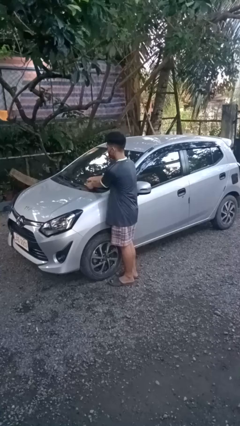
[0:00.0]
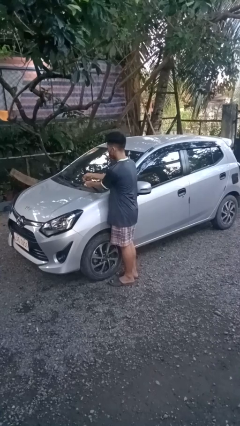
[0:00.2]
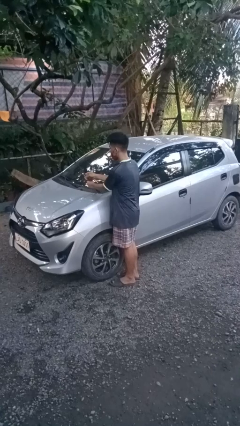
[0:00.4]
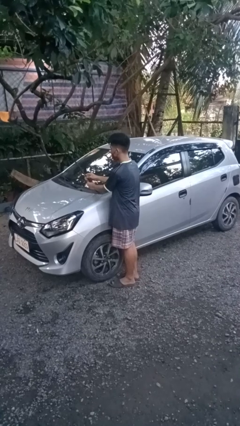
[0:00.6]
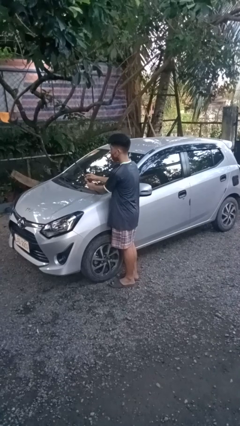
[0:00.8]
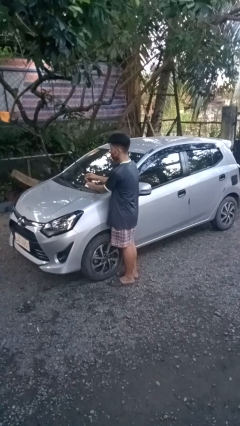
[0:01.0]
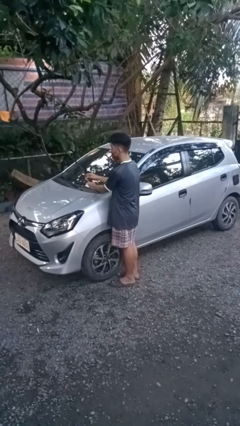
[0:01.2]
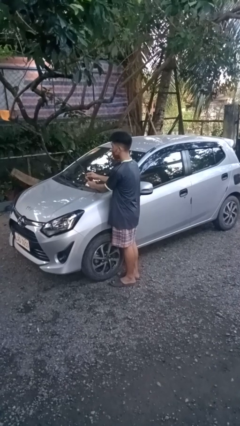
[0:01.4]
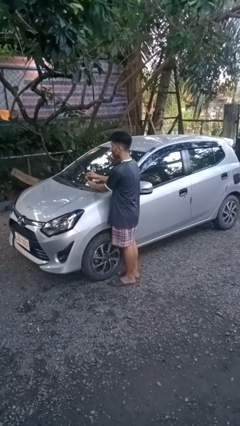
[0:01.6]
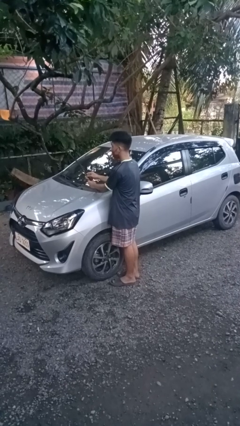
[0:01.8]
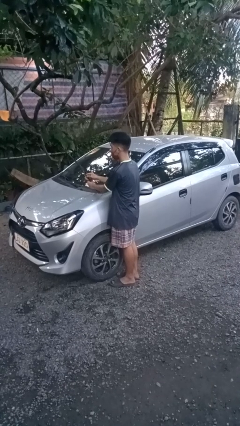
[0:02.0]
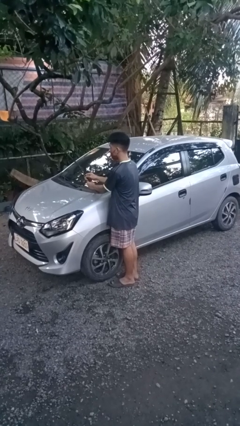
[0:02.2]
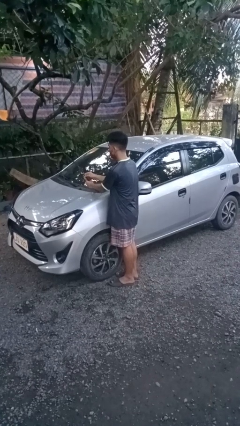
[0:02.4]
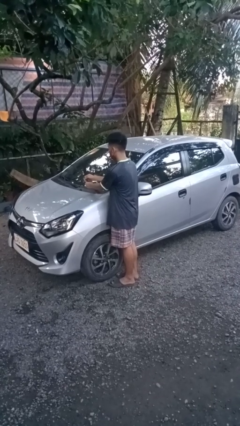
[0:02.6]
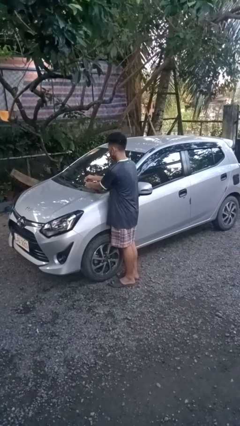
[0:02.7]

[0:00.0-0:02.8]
person flips up car wipers

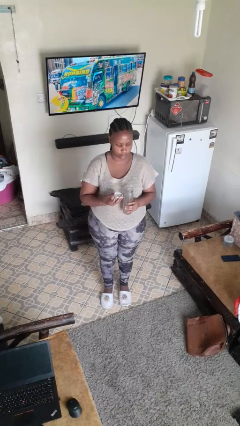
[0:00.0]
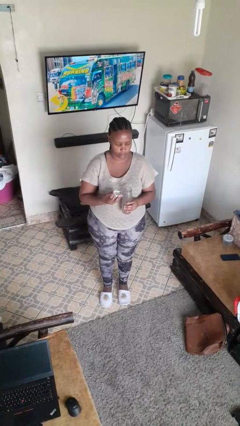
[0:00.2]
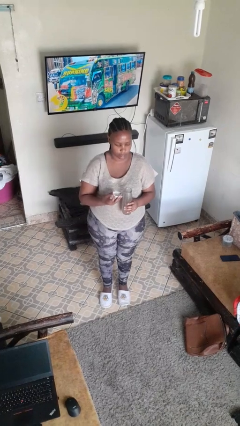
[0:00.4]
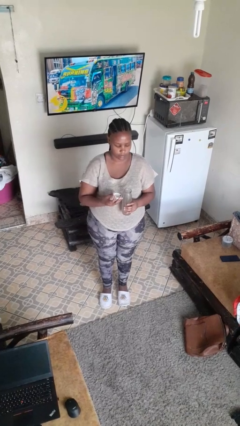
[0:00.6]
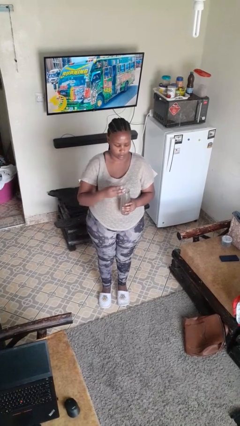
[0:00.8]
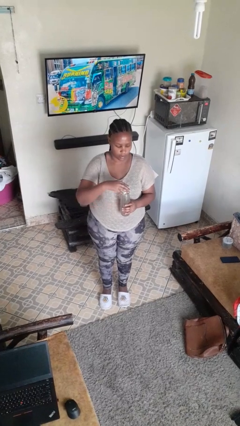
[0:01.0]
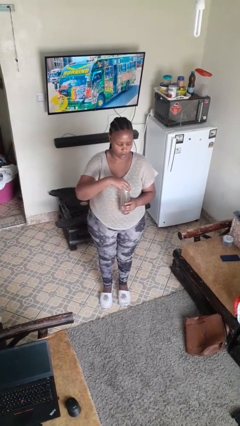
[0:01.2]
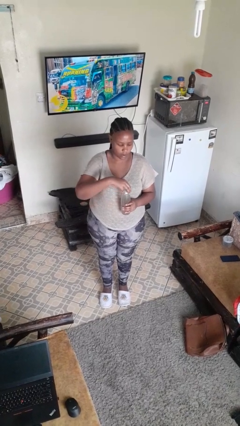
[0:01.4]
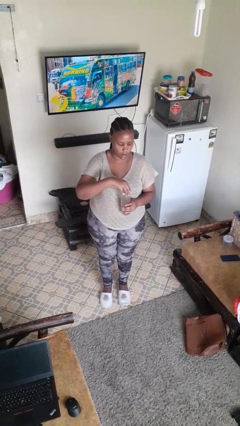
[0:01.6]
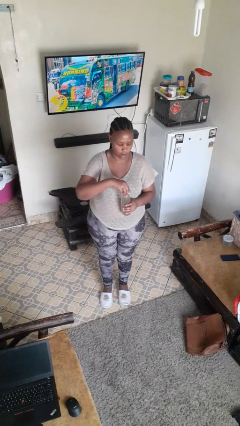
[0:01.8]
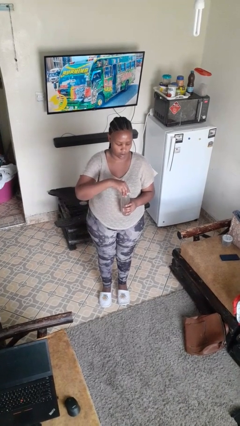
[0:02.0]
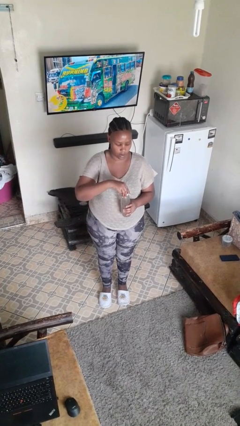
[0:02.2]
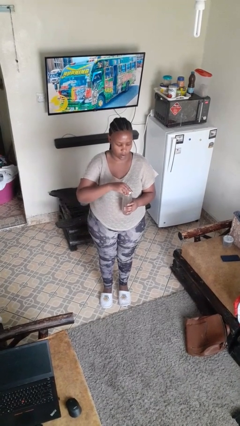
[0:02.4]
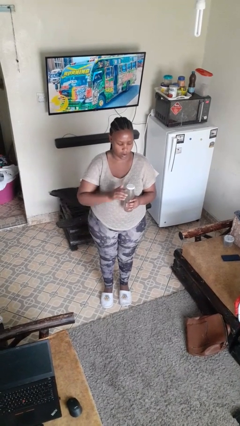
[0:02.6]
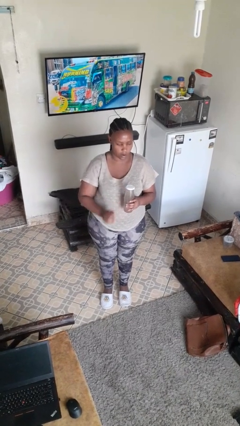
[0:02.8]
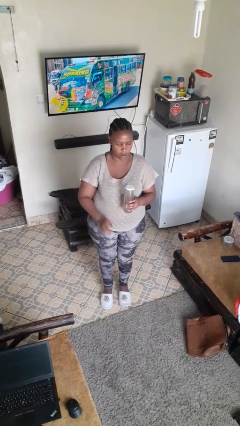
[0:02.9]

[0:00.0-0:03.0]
person screws lid to bottle

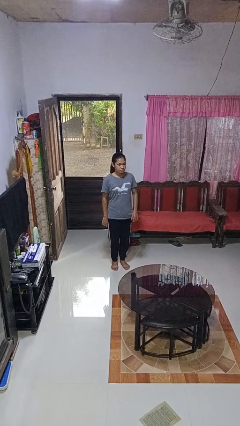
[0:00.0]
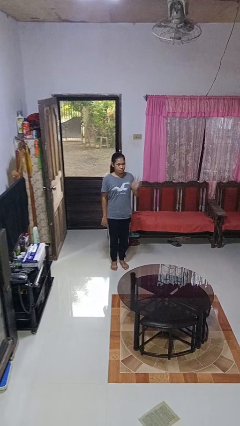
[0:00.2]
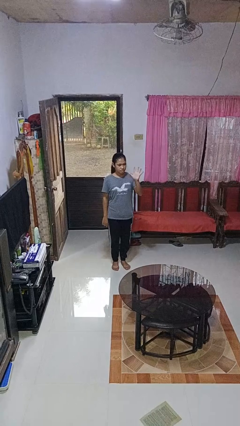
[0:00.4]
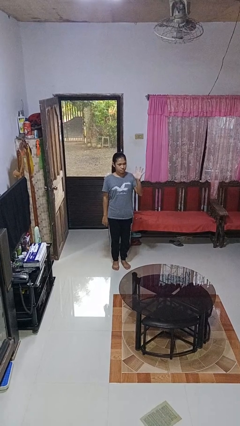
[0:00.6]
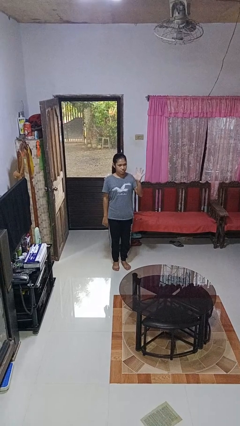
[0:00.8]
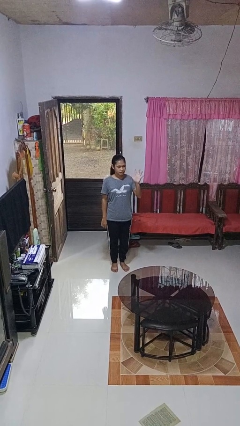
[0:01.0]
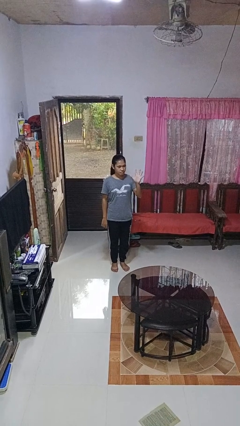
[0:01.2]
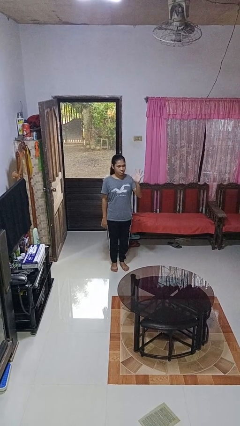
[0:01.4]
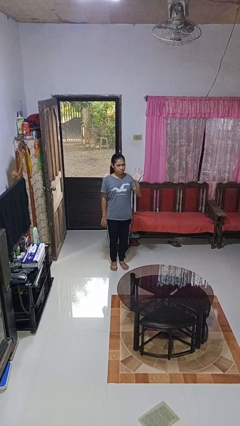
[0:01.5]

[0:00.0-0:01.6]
person gestures number five

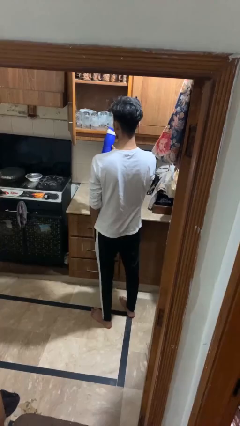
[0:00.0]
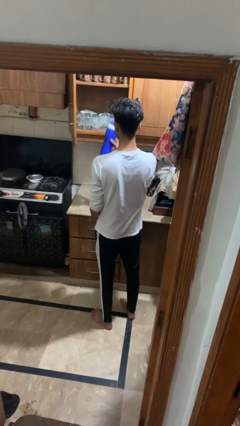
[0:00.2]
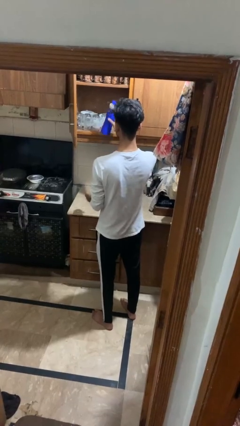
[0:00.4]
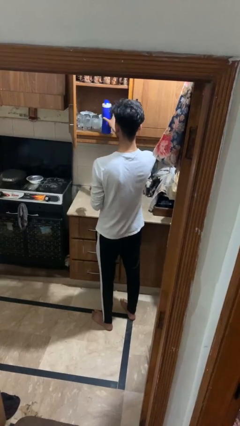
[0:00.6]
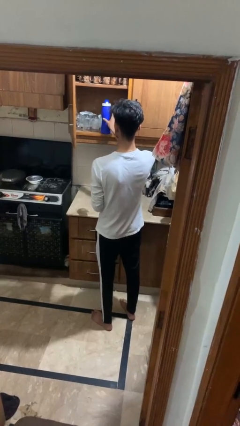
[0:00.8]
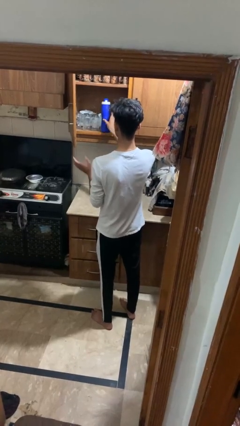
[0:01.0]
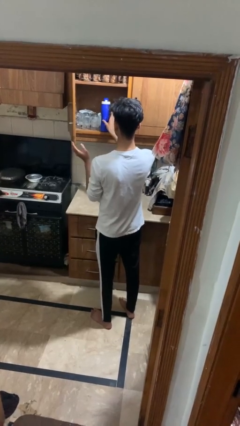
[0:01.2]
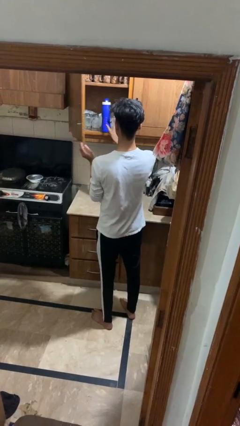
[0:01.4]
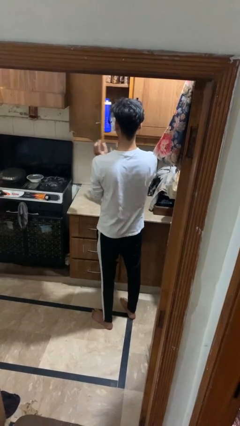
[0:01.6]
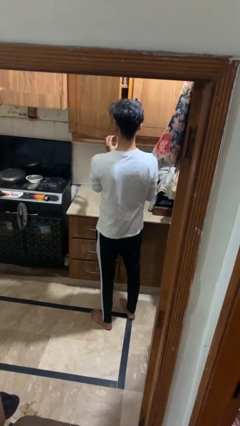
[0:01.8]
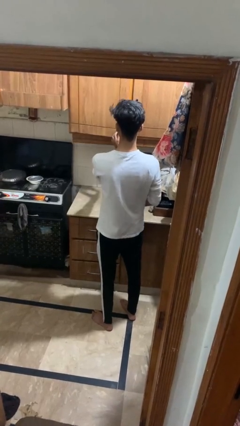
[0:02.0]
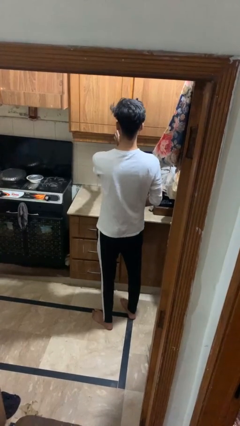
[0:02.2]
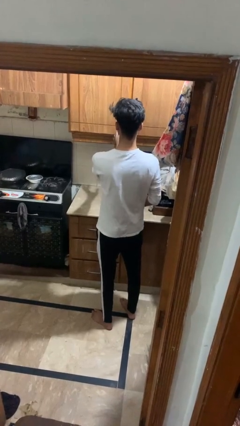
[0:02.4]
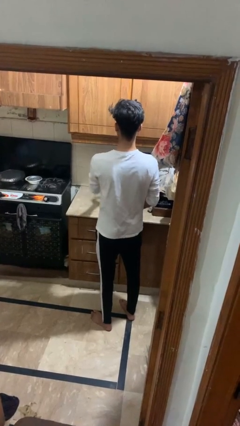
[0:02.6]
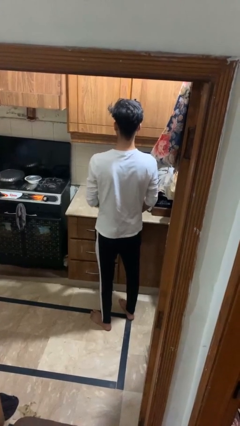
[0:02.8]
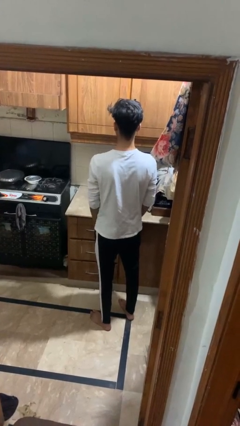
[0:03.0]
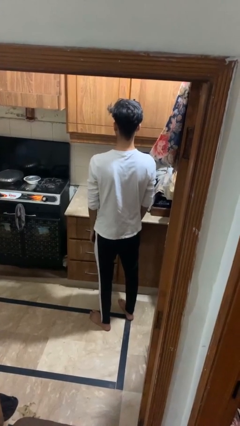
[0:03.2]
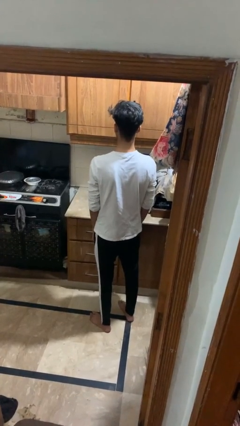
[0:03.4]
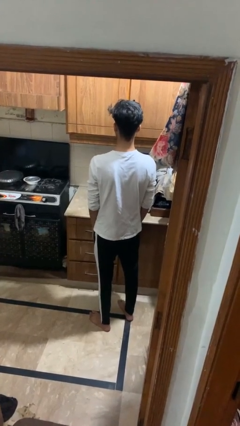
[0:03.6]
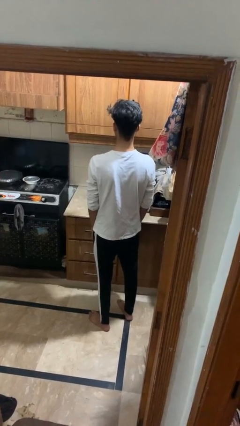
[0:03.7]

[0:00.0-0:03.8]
person takes object from cabinet

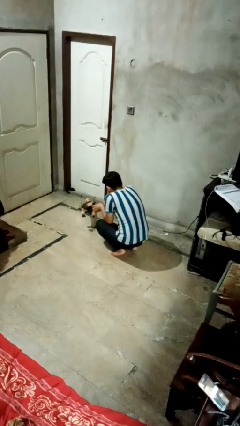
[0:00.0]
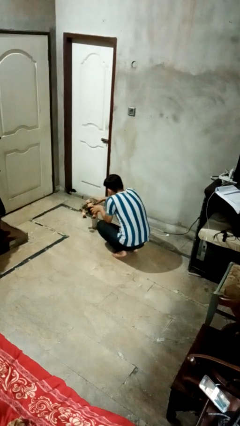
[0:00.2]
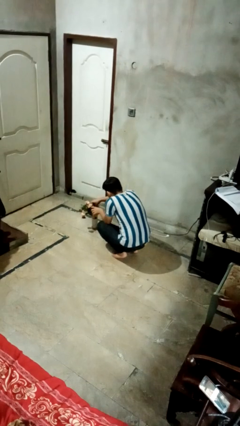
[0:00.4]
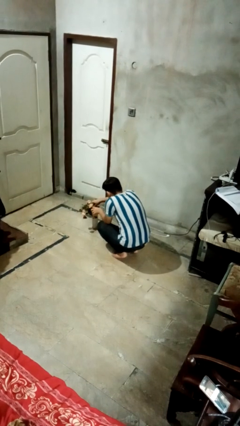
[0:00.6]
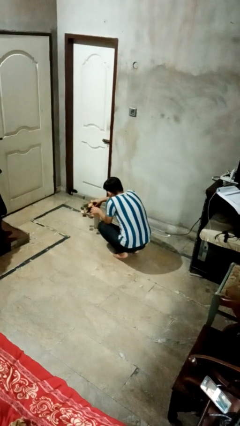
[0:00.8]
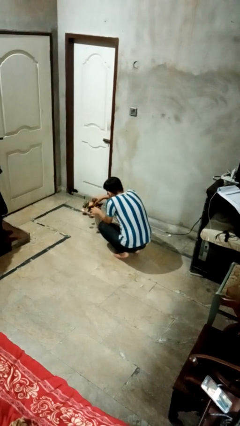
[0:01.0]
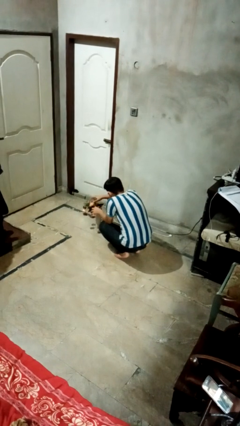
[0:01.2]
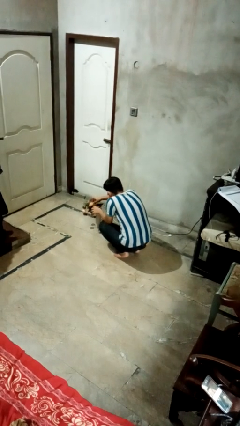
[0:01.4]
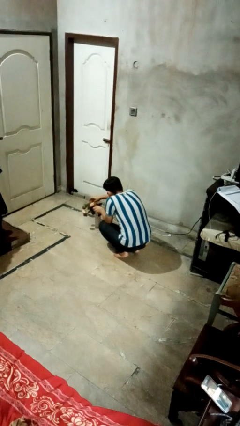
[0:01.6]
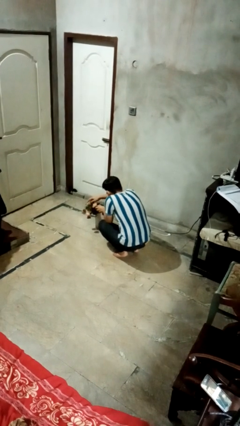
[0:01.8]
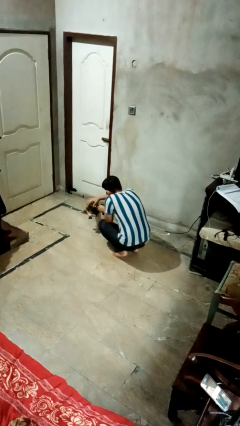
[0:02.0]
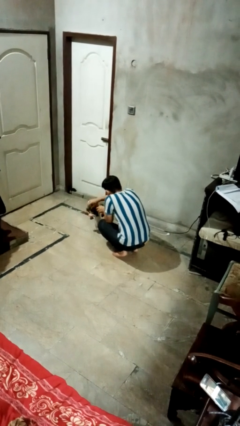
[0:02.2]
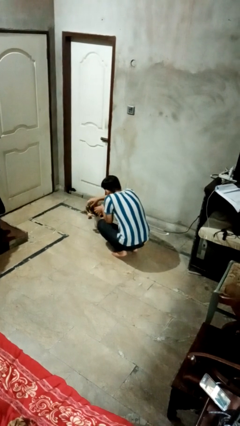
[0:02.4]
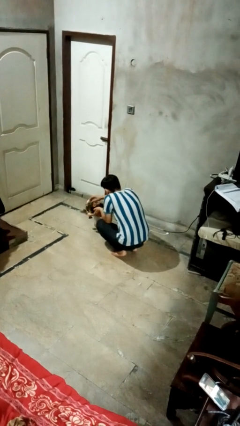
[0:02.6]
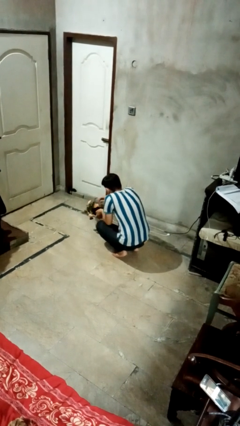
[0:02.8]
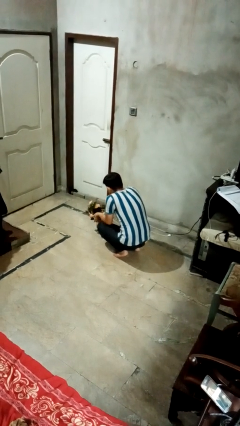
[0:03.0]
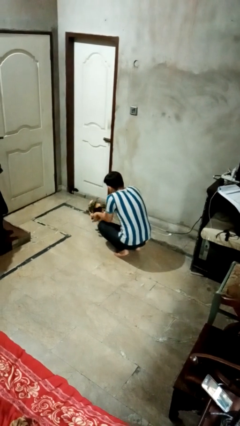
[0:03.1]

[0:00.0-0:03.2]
person arranges flowers in vase

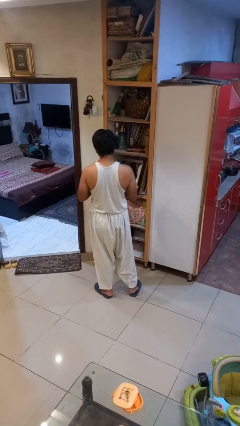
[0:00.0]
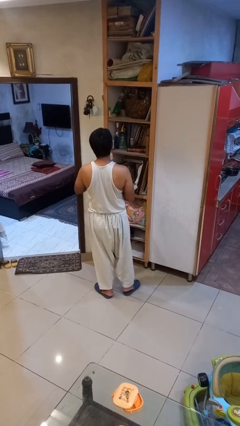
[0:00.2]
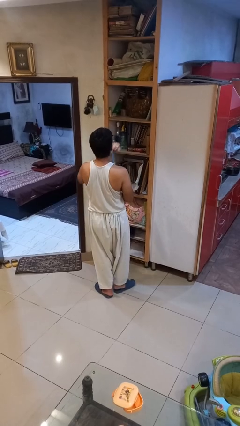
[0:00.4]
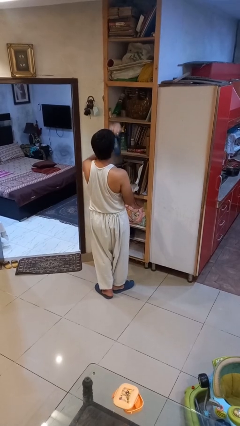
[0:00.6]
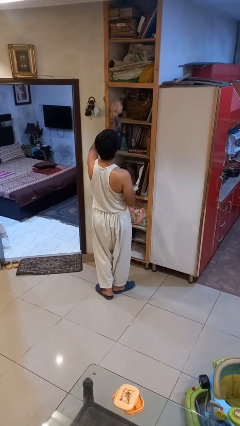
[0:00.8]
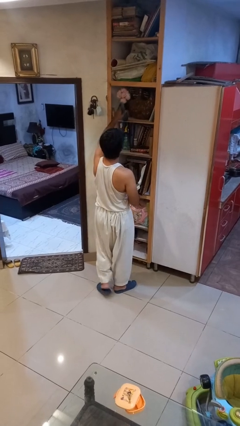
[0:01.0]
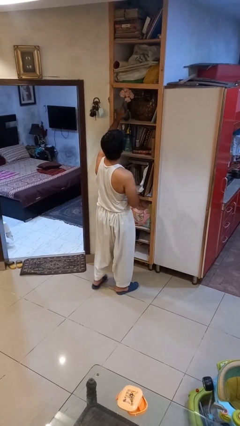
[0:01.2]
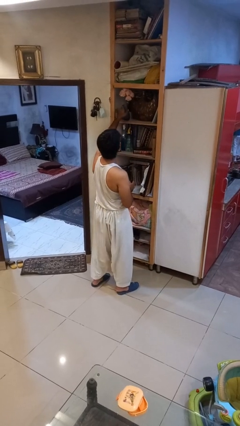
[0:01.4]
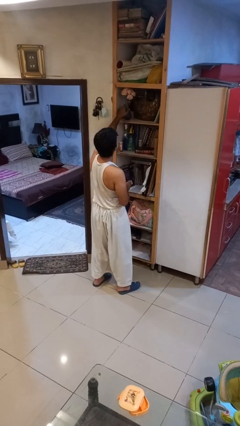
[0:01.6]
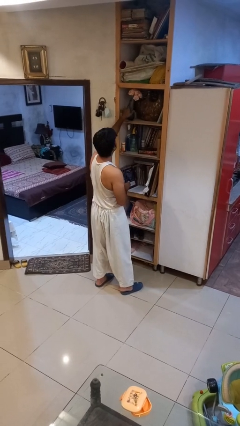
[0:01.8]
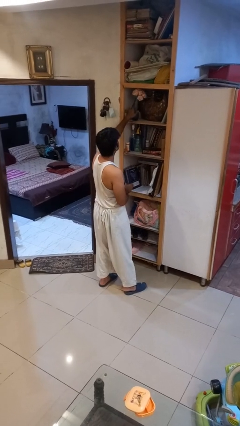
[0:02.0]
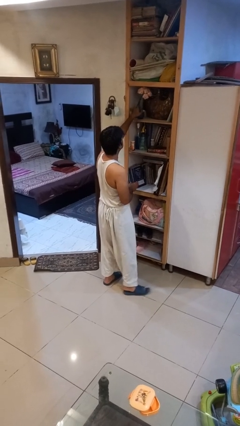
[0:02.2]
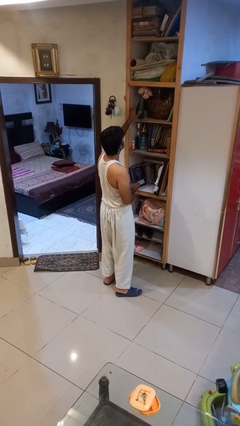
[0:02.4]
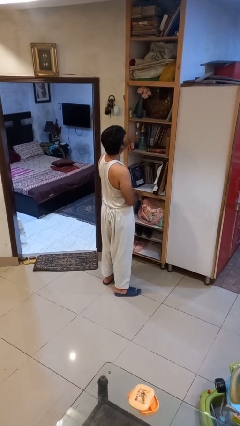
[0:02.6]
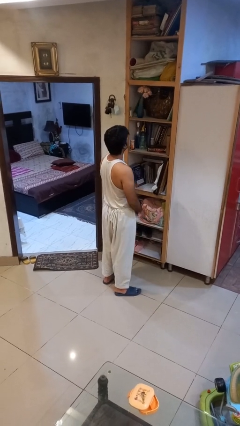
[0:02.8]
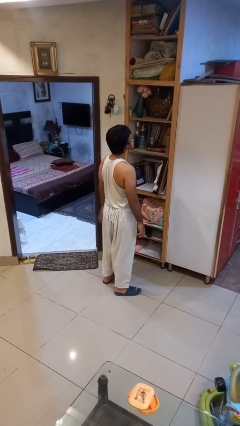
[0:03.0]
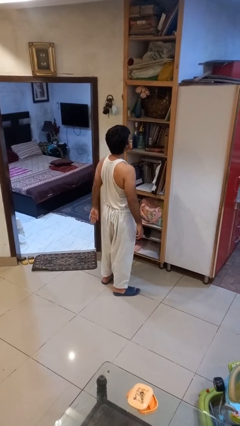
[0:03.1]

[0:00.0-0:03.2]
person puts down object on shelf
